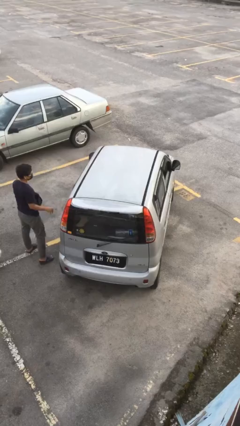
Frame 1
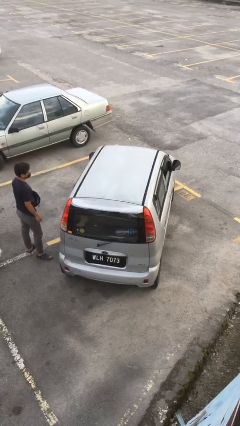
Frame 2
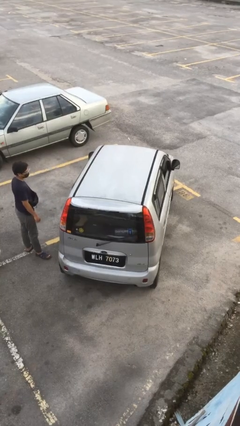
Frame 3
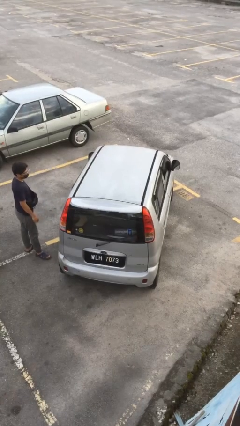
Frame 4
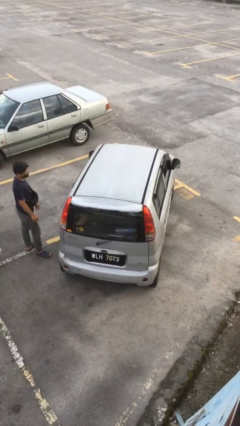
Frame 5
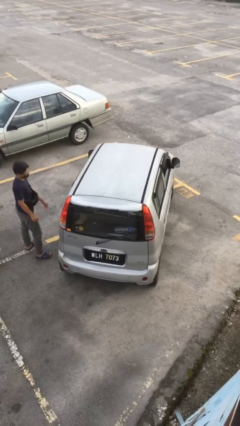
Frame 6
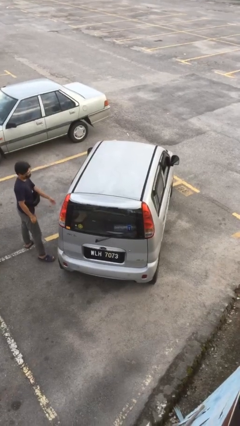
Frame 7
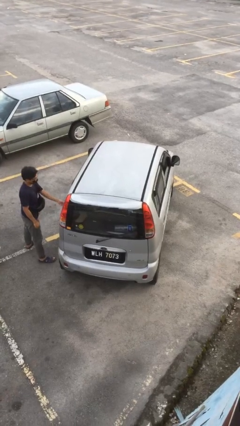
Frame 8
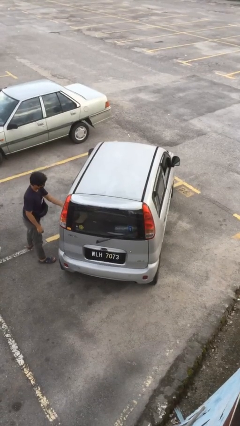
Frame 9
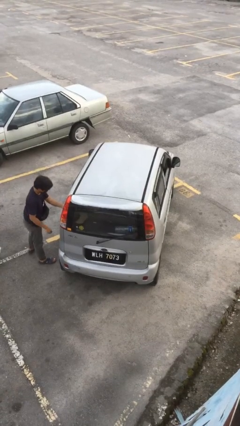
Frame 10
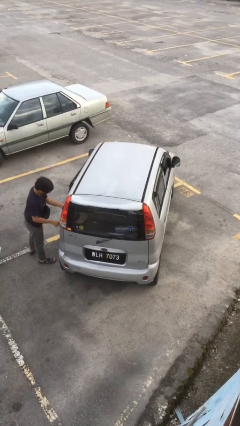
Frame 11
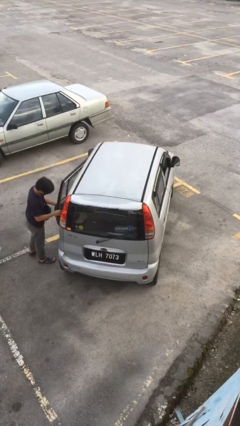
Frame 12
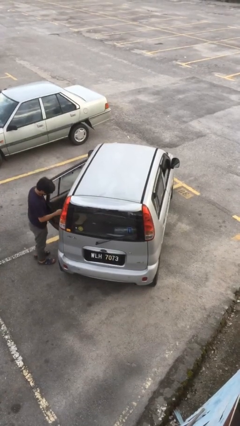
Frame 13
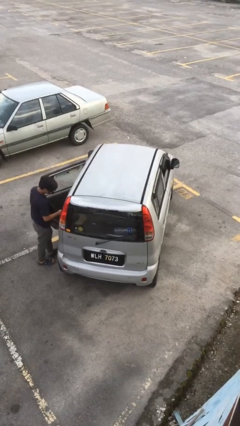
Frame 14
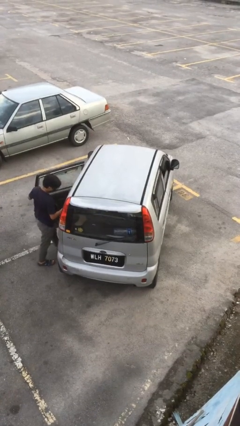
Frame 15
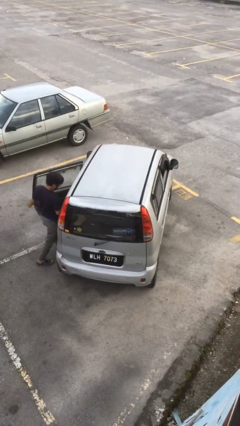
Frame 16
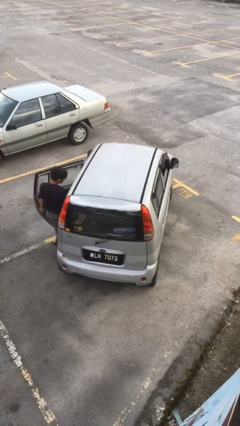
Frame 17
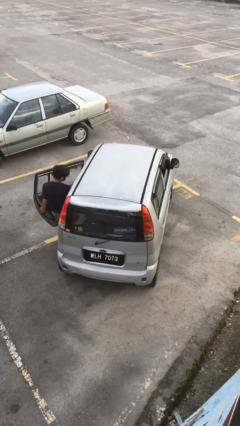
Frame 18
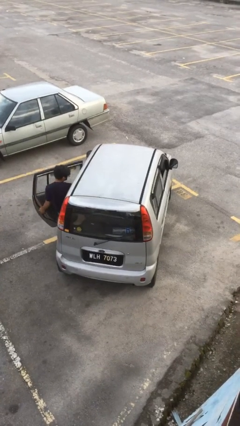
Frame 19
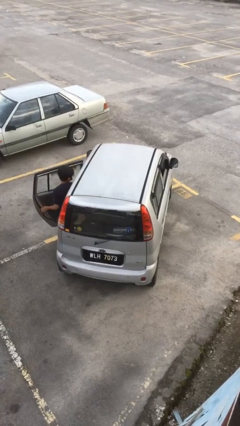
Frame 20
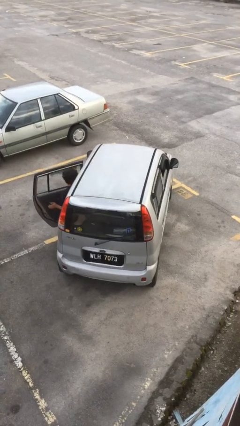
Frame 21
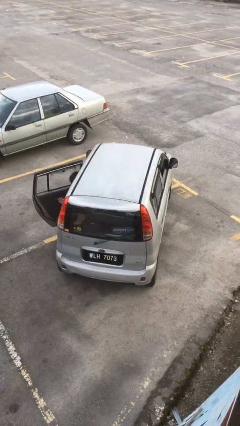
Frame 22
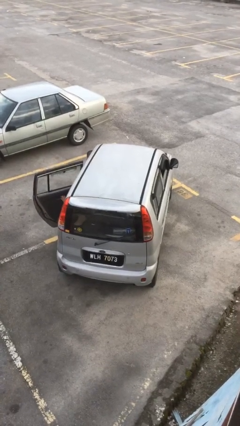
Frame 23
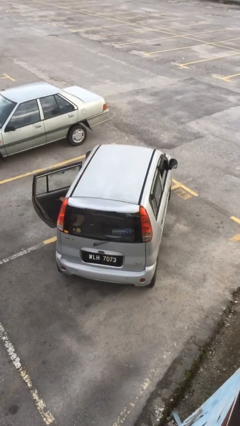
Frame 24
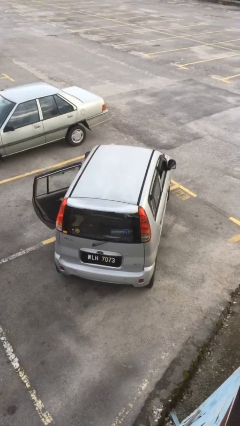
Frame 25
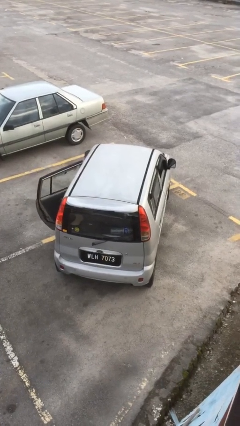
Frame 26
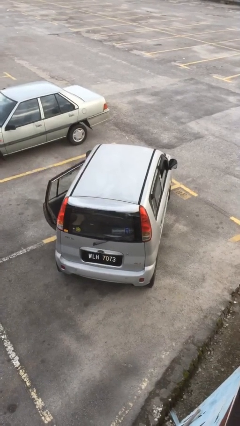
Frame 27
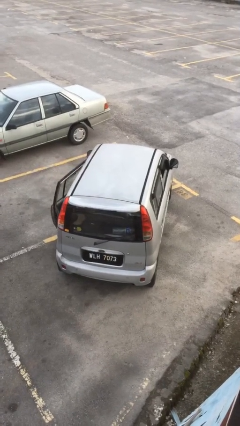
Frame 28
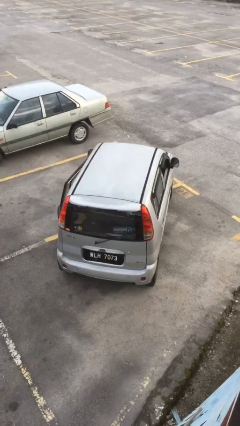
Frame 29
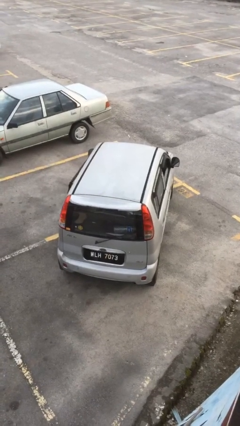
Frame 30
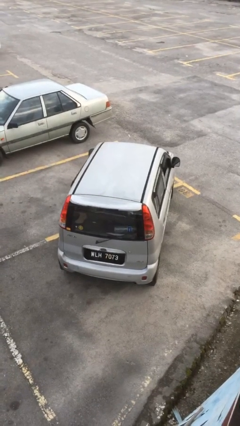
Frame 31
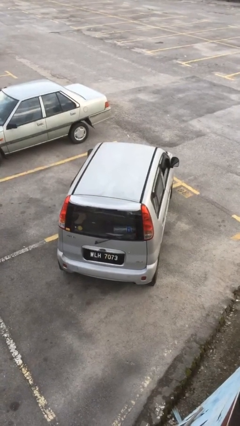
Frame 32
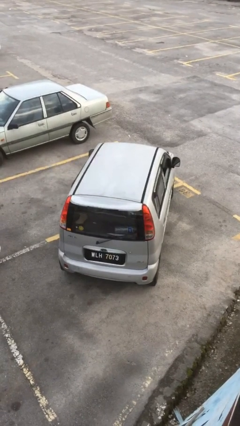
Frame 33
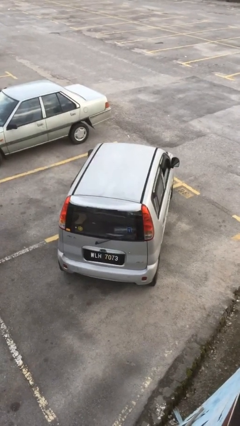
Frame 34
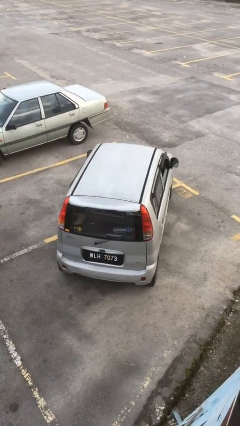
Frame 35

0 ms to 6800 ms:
car picks up person

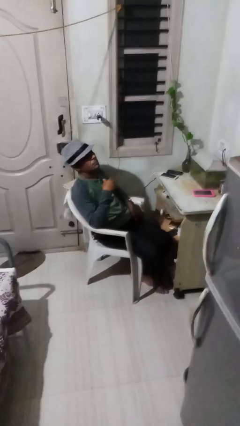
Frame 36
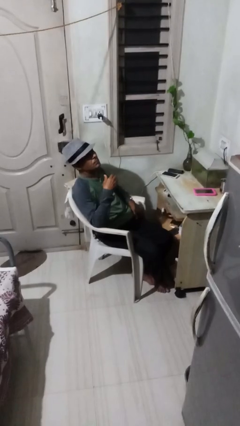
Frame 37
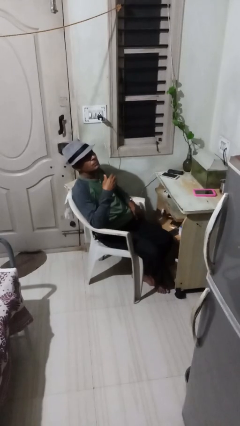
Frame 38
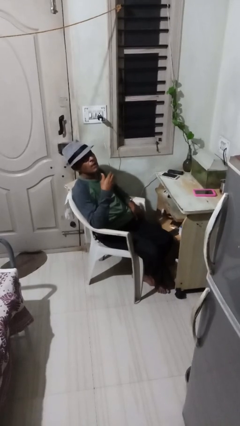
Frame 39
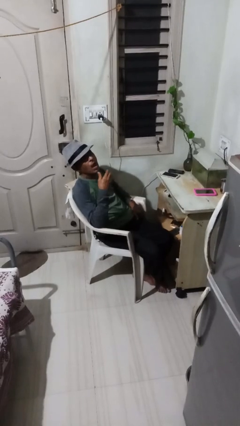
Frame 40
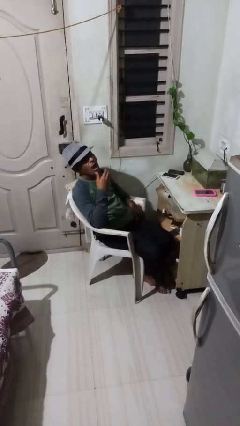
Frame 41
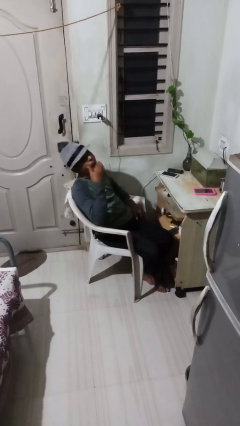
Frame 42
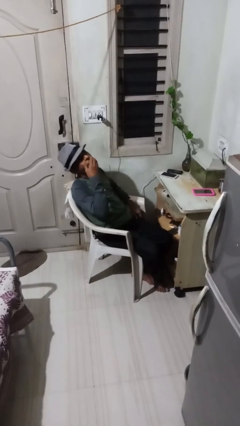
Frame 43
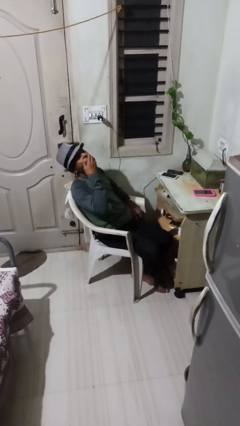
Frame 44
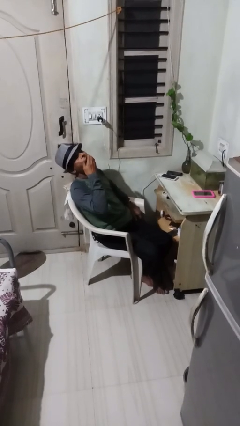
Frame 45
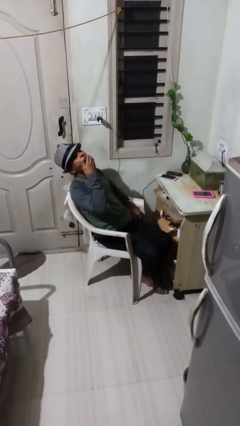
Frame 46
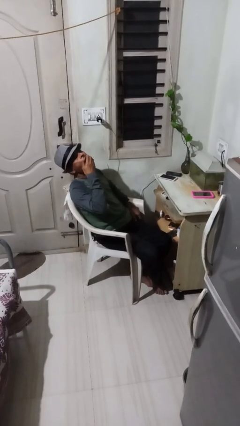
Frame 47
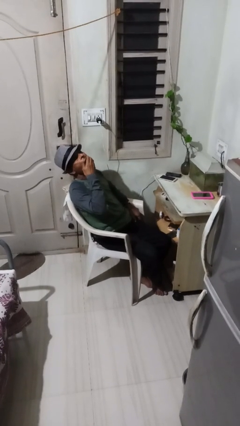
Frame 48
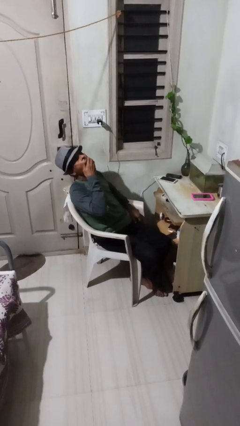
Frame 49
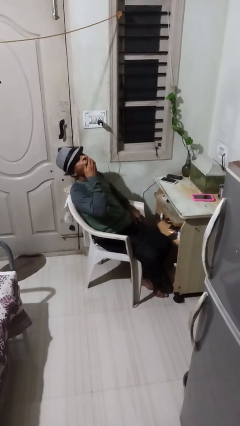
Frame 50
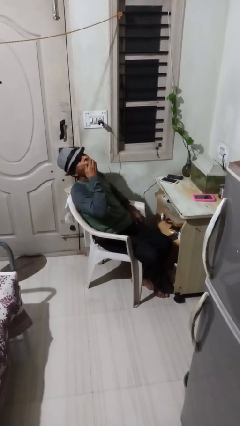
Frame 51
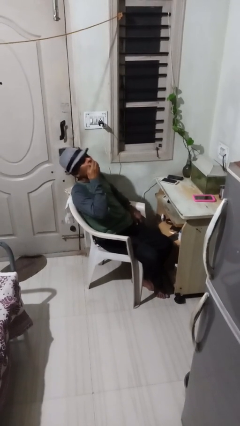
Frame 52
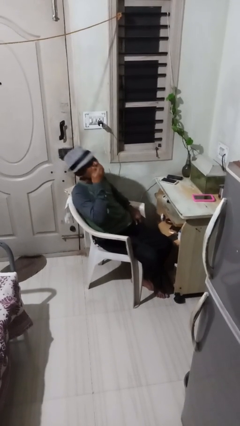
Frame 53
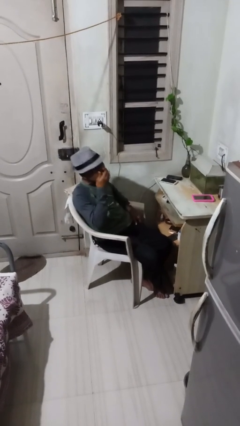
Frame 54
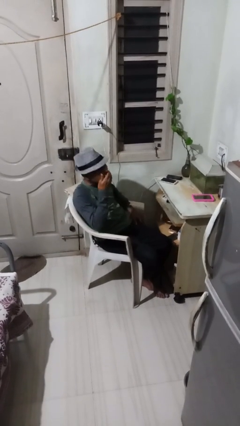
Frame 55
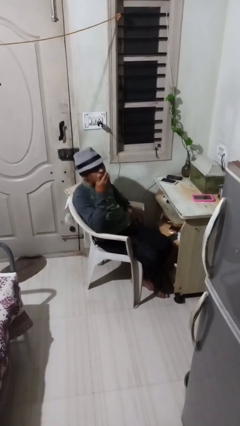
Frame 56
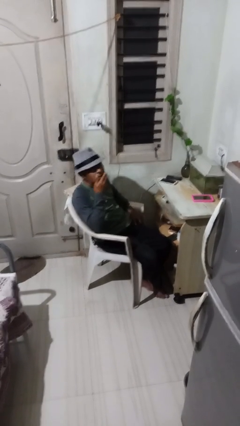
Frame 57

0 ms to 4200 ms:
person yawns

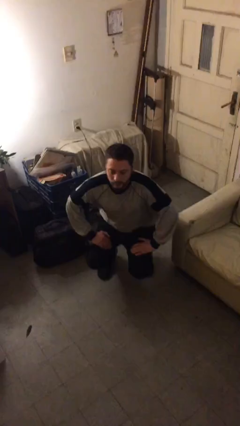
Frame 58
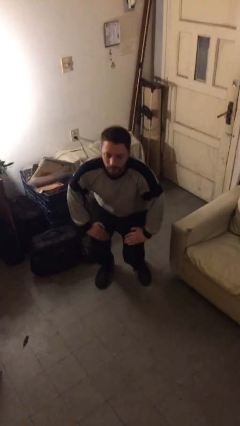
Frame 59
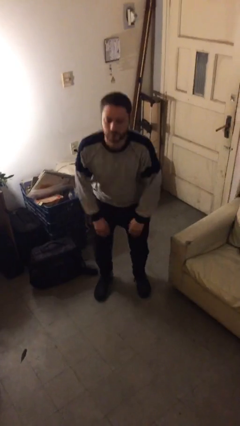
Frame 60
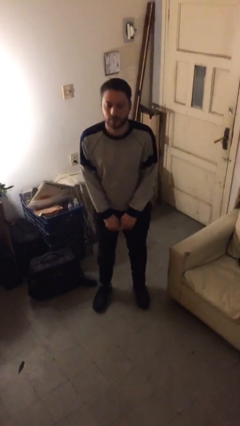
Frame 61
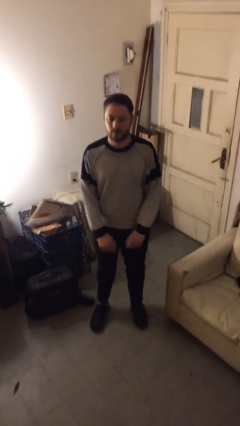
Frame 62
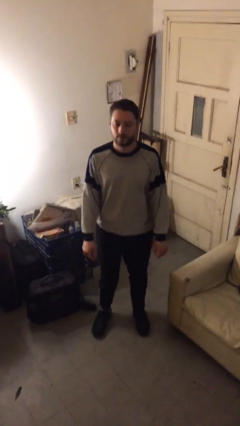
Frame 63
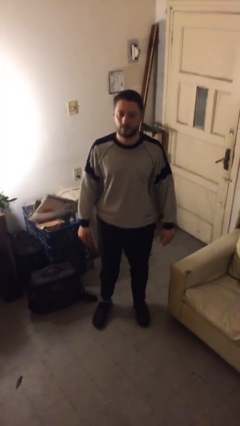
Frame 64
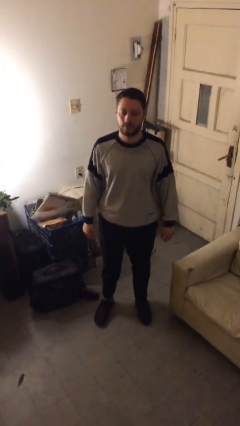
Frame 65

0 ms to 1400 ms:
person stands up from floor

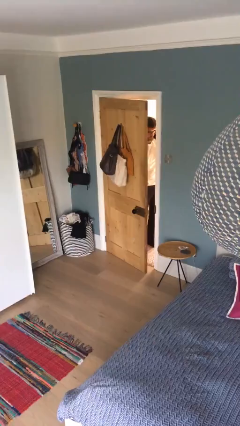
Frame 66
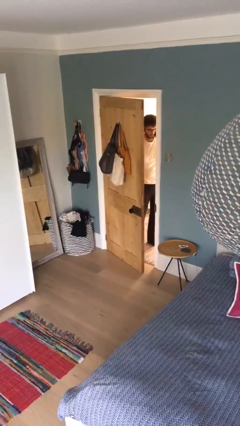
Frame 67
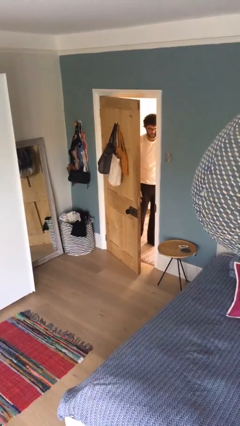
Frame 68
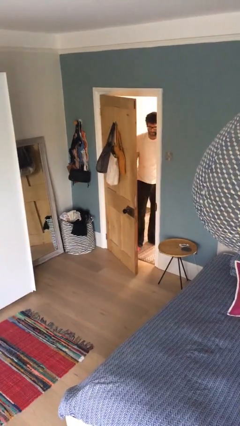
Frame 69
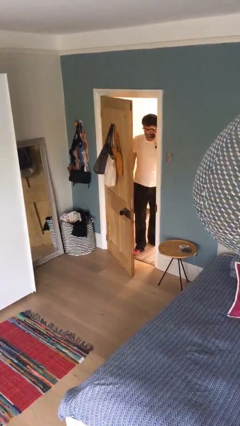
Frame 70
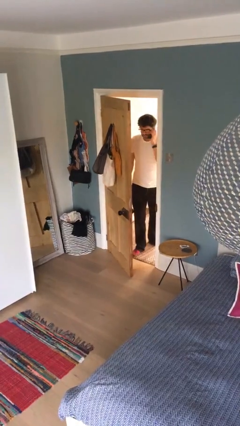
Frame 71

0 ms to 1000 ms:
person opens facility door

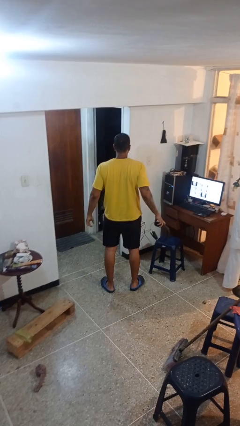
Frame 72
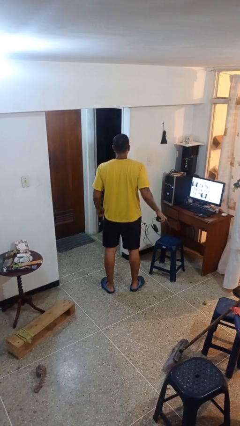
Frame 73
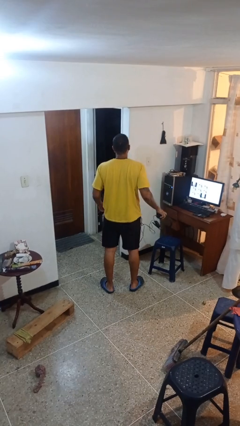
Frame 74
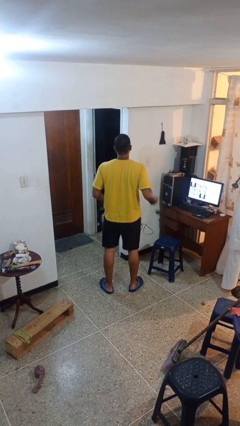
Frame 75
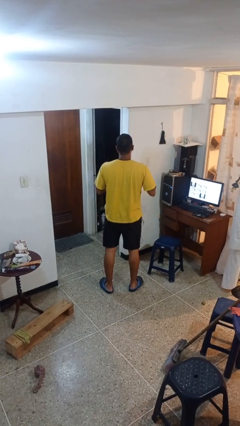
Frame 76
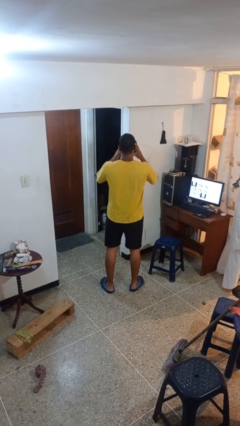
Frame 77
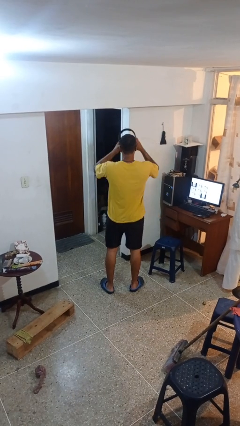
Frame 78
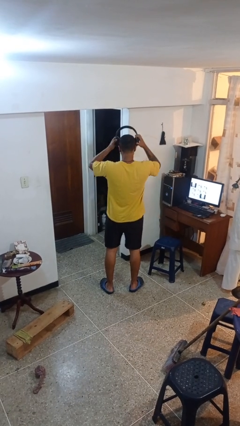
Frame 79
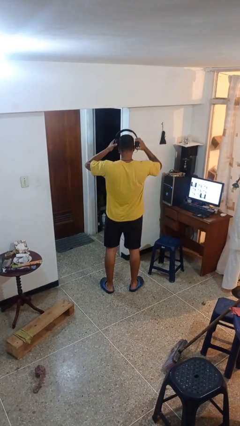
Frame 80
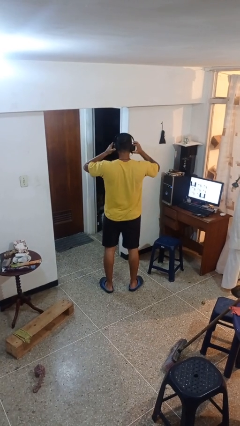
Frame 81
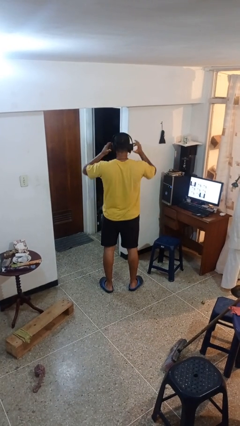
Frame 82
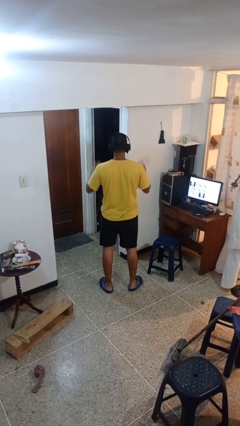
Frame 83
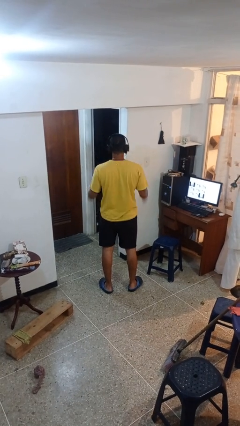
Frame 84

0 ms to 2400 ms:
person puts on headphones

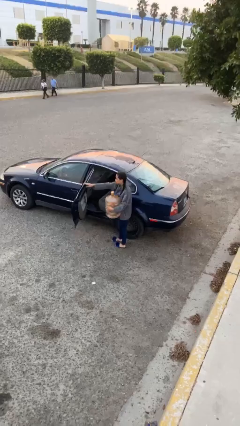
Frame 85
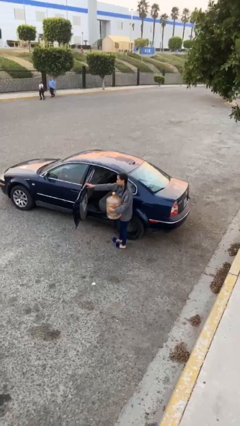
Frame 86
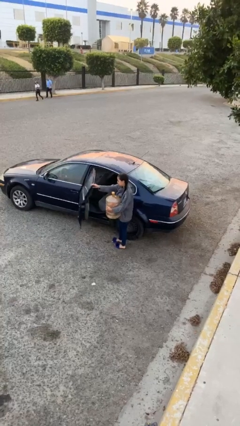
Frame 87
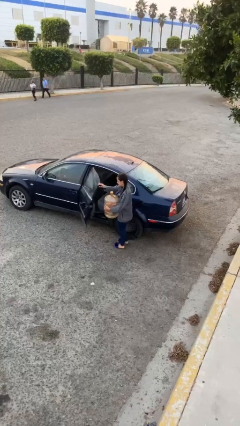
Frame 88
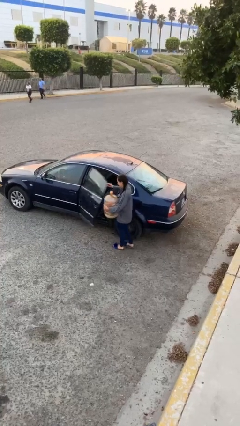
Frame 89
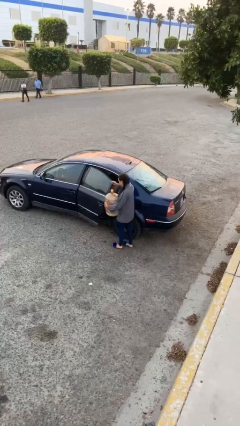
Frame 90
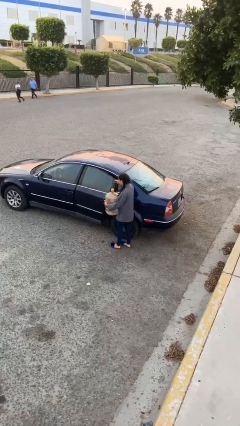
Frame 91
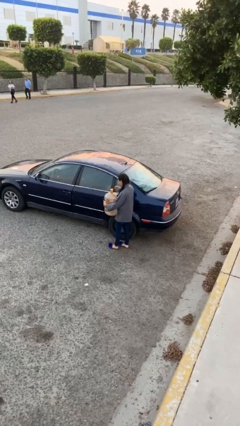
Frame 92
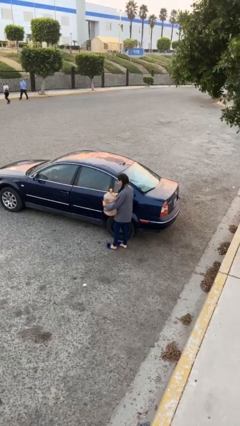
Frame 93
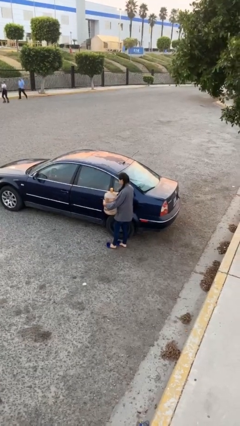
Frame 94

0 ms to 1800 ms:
person closes car door
